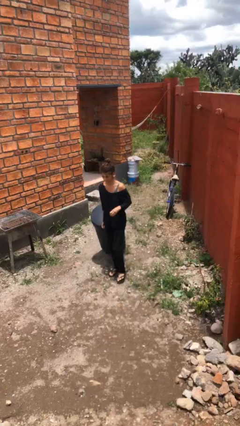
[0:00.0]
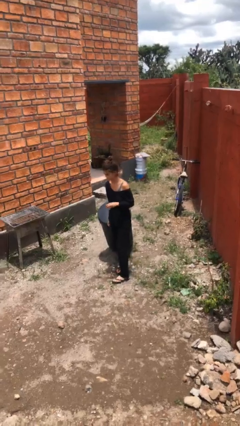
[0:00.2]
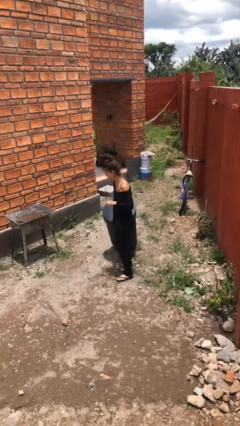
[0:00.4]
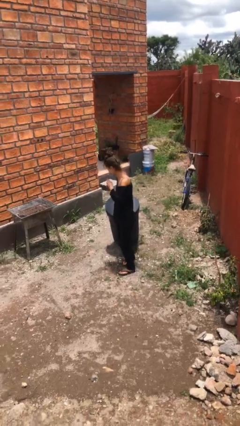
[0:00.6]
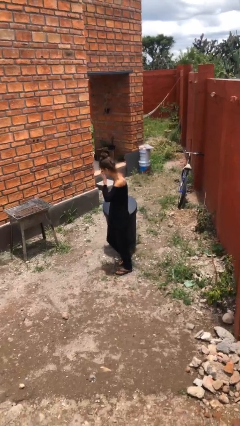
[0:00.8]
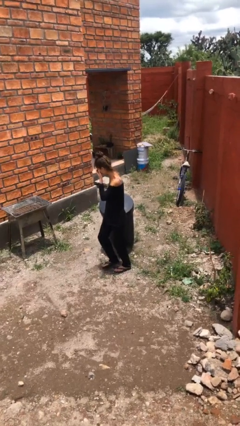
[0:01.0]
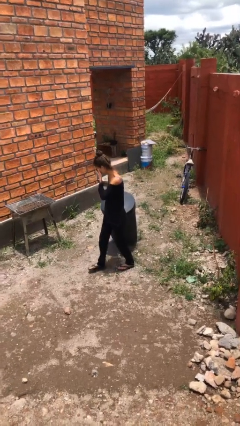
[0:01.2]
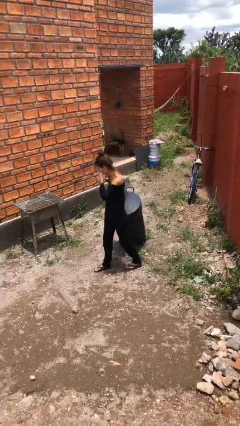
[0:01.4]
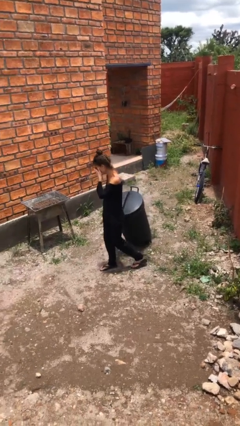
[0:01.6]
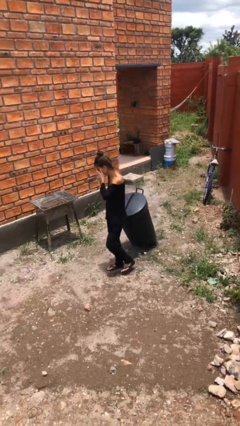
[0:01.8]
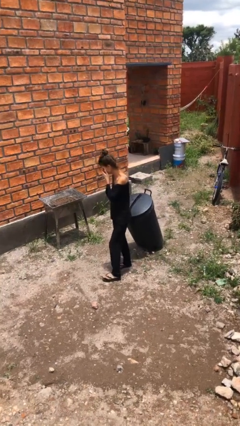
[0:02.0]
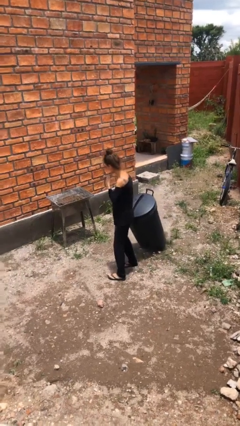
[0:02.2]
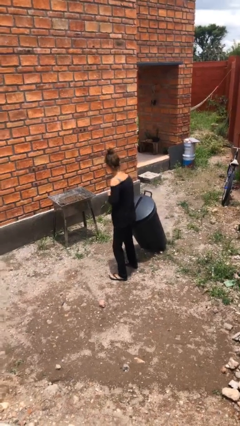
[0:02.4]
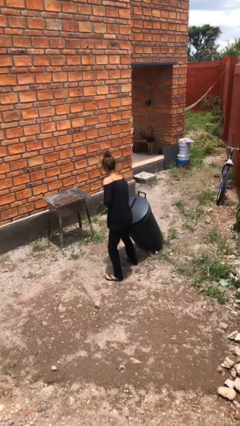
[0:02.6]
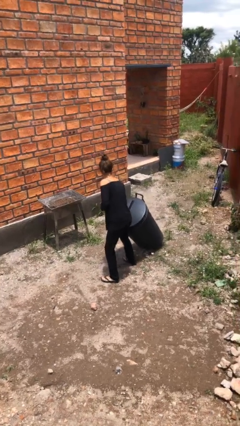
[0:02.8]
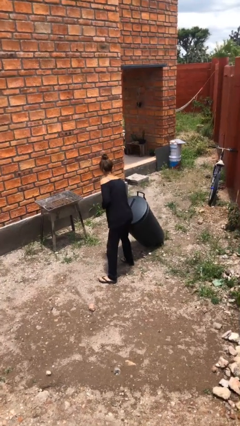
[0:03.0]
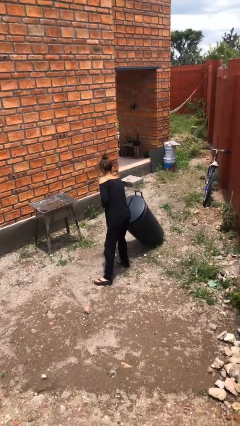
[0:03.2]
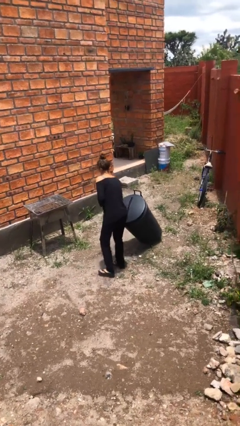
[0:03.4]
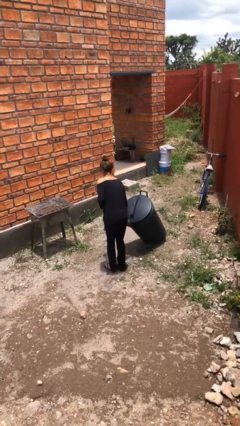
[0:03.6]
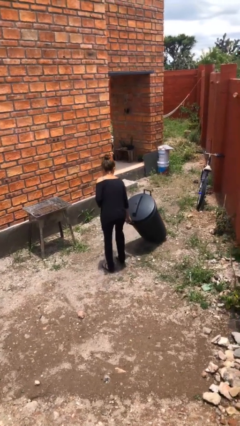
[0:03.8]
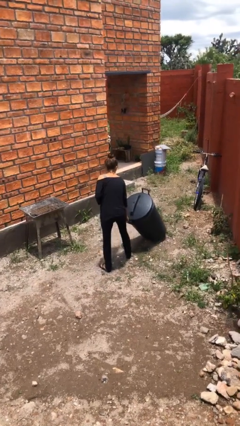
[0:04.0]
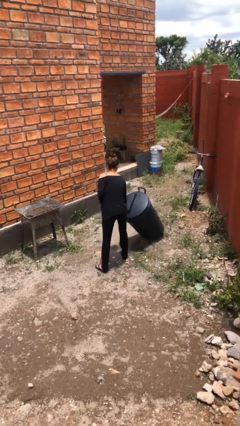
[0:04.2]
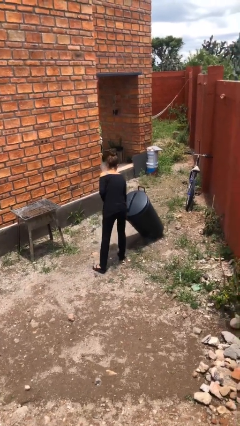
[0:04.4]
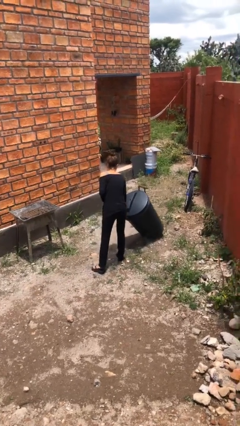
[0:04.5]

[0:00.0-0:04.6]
person pushes wheeled trashcan

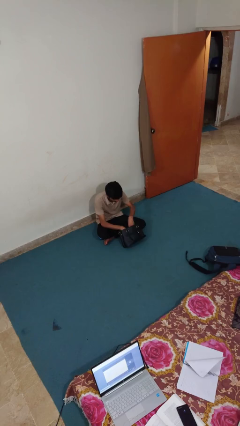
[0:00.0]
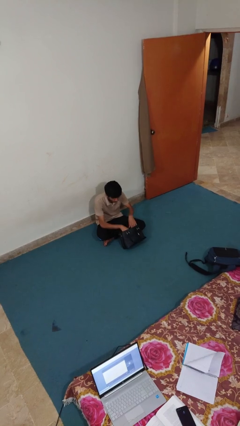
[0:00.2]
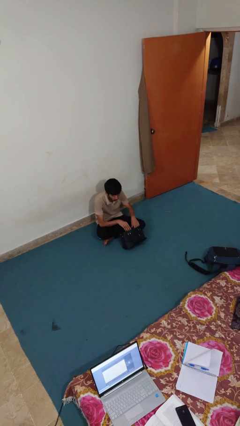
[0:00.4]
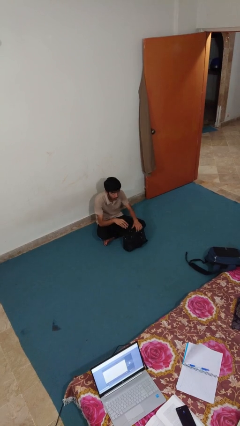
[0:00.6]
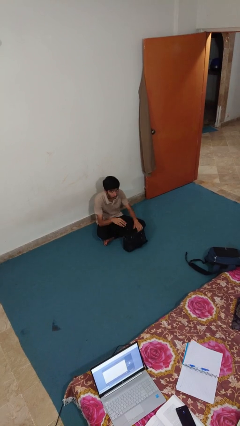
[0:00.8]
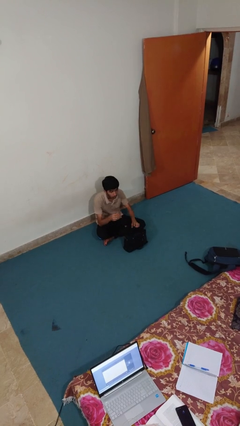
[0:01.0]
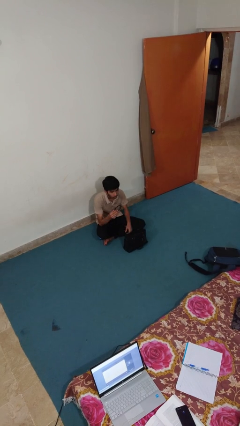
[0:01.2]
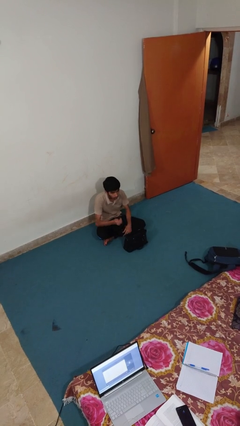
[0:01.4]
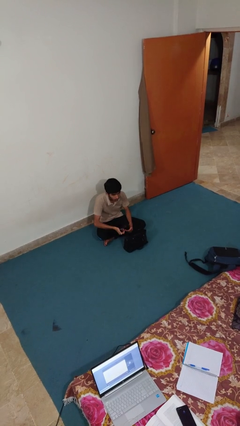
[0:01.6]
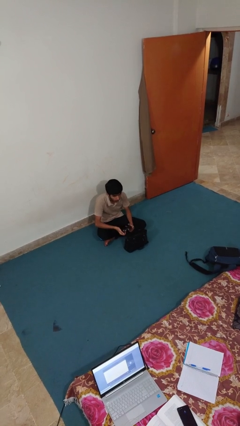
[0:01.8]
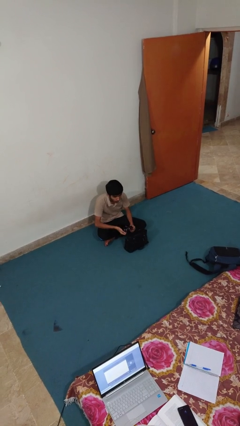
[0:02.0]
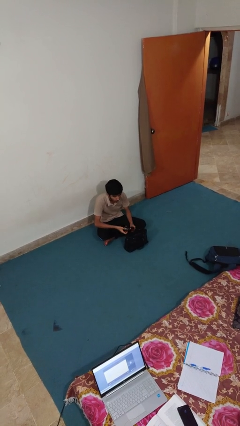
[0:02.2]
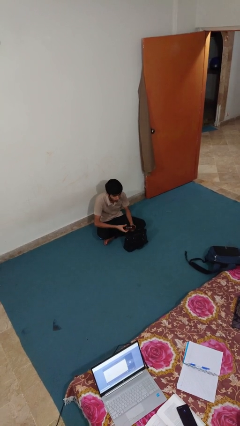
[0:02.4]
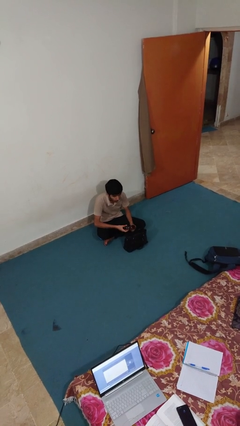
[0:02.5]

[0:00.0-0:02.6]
person takes object from purse

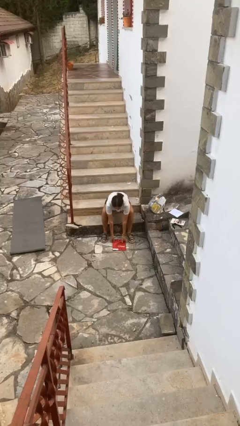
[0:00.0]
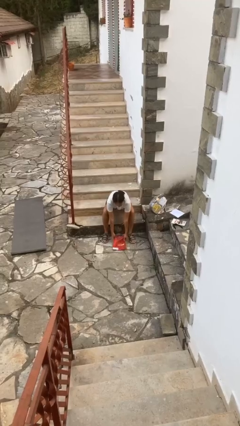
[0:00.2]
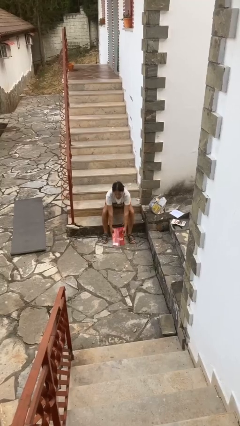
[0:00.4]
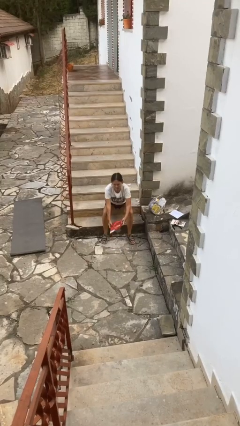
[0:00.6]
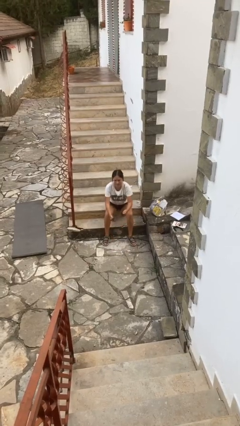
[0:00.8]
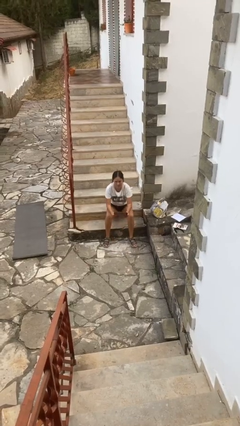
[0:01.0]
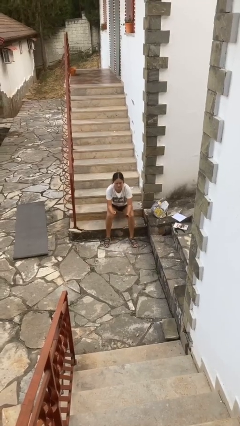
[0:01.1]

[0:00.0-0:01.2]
person picks up object from floor

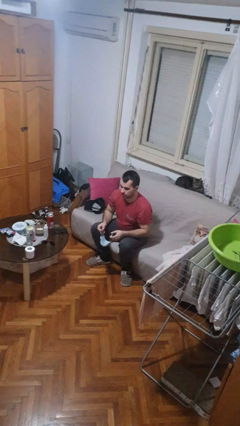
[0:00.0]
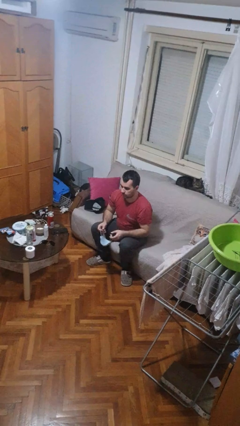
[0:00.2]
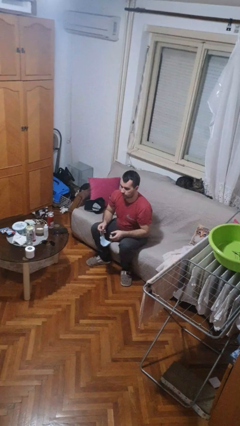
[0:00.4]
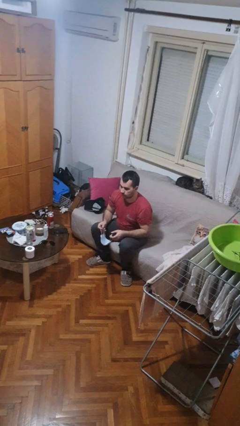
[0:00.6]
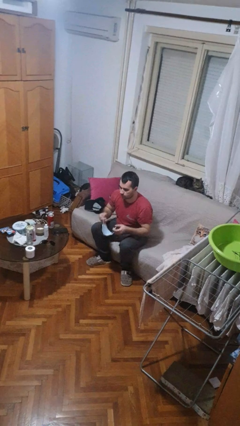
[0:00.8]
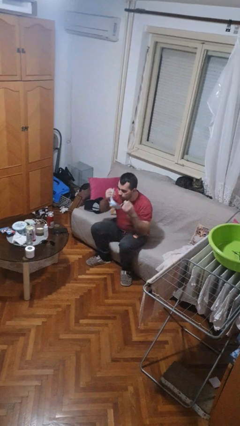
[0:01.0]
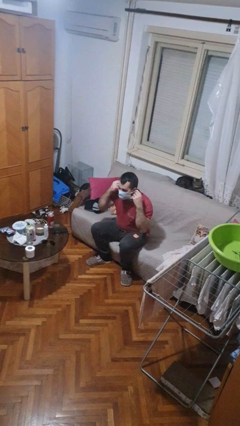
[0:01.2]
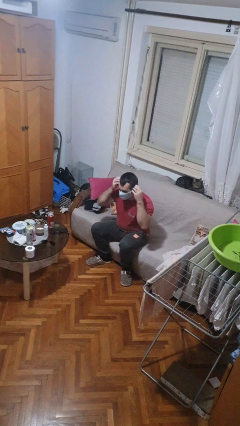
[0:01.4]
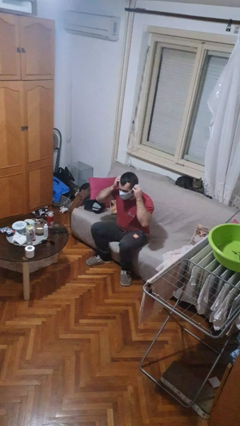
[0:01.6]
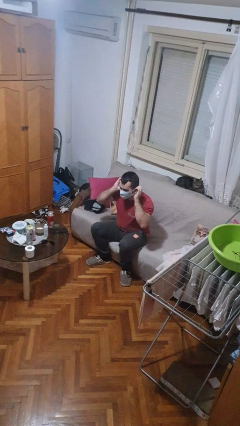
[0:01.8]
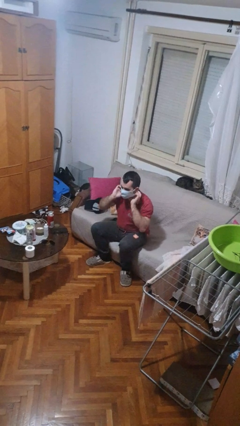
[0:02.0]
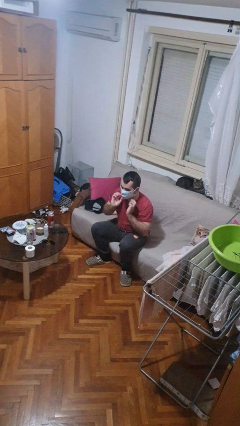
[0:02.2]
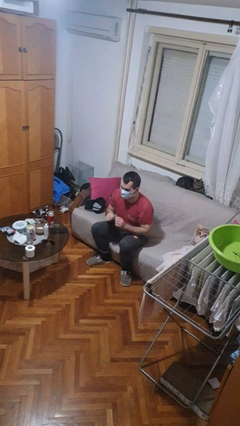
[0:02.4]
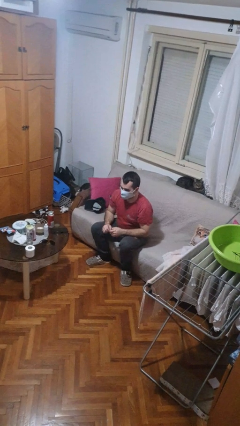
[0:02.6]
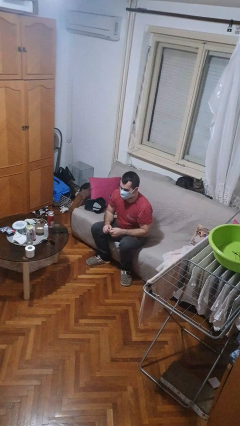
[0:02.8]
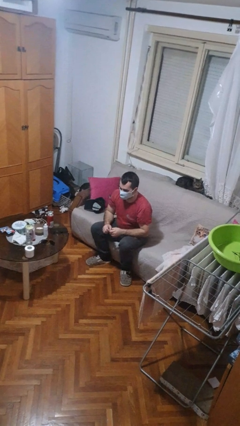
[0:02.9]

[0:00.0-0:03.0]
person puts on facemask

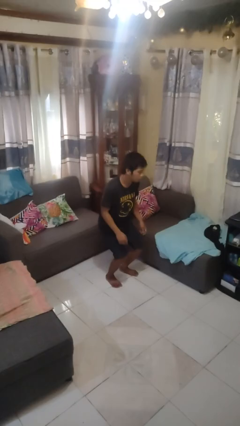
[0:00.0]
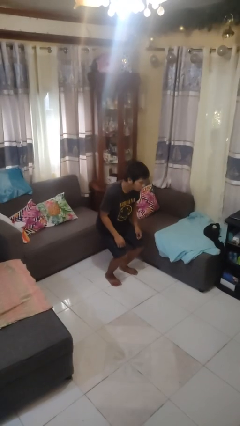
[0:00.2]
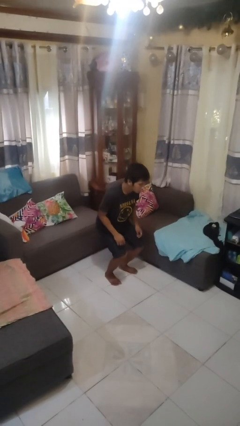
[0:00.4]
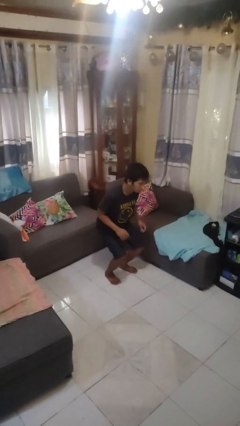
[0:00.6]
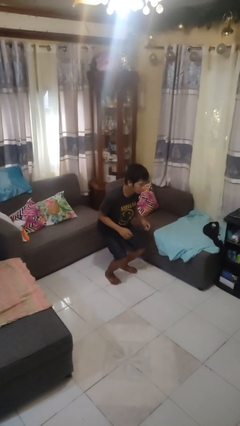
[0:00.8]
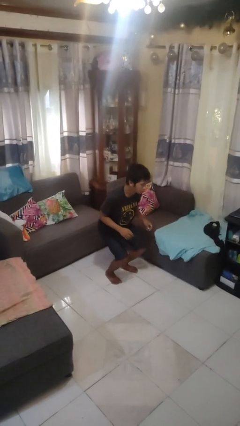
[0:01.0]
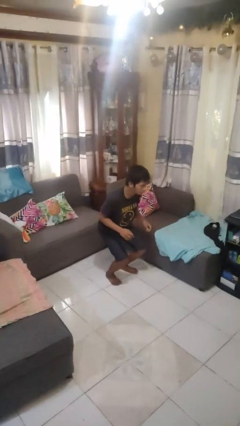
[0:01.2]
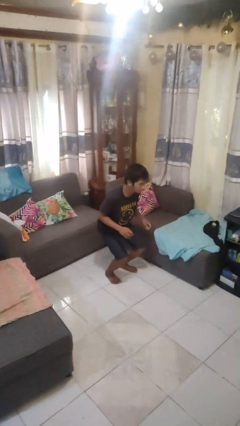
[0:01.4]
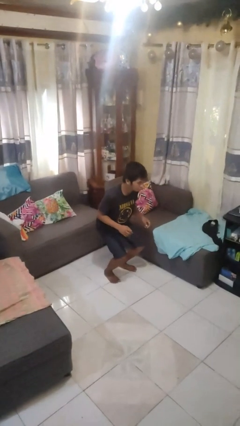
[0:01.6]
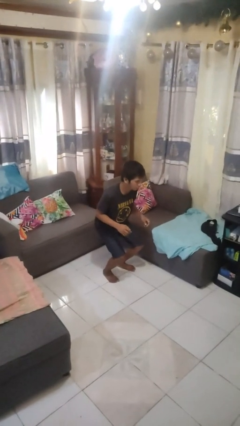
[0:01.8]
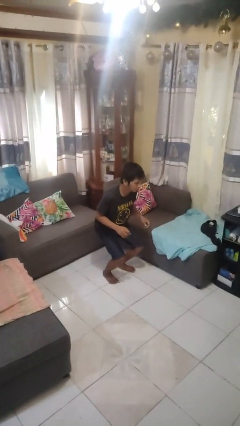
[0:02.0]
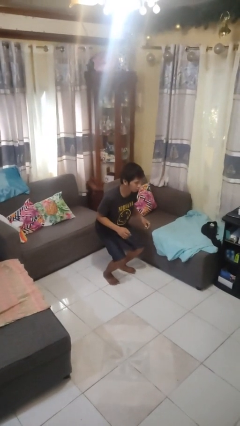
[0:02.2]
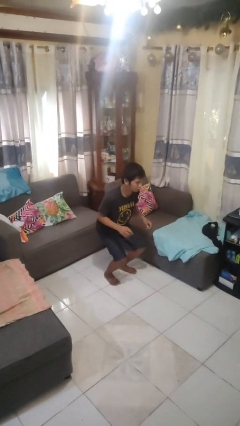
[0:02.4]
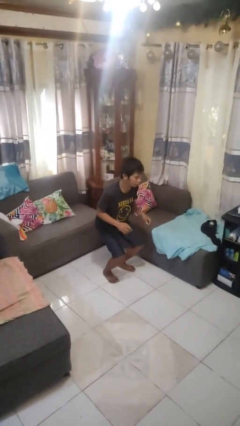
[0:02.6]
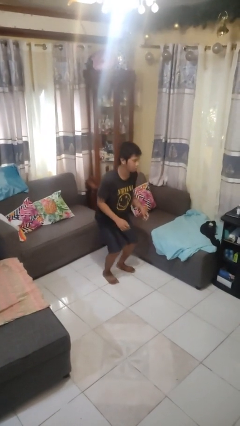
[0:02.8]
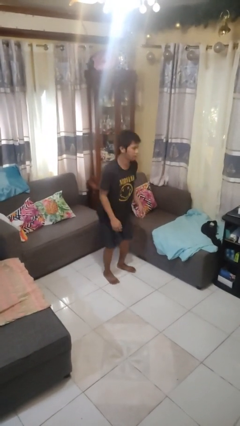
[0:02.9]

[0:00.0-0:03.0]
person squats

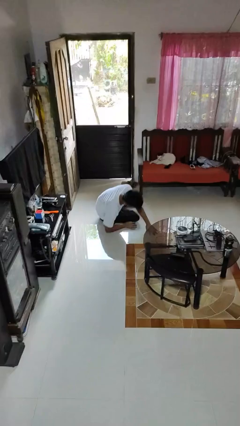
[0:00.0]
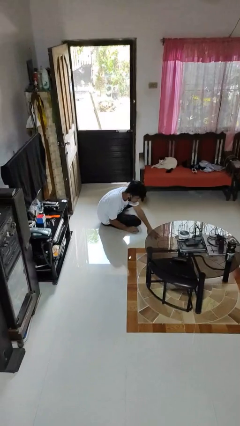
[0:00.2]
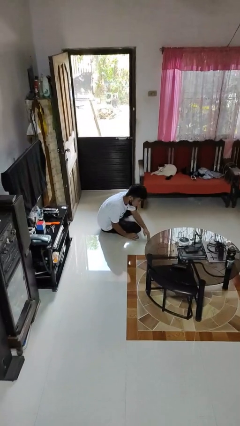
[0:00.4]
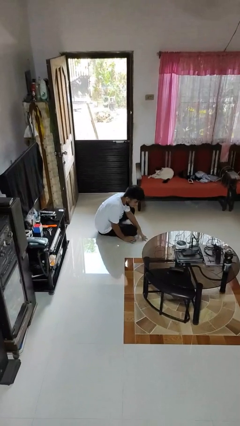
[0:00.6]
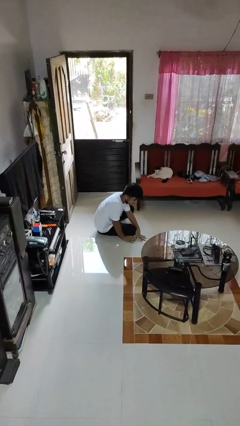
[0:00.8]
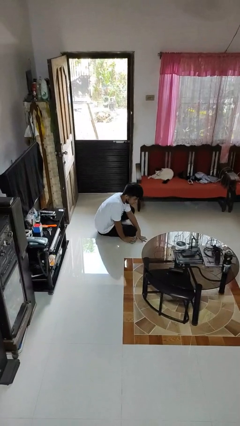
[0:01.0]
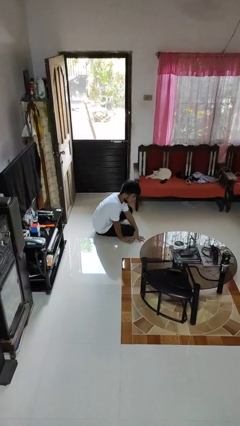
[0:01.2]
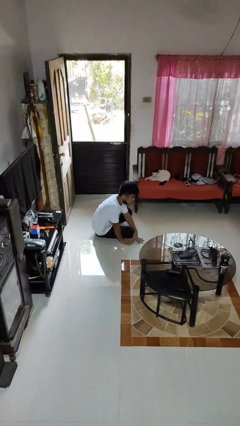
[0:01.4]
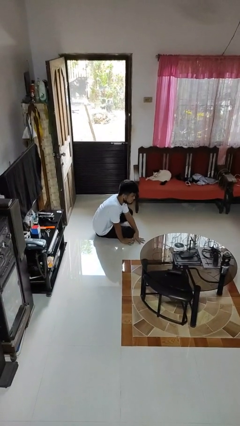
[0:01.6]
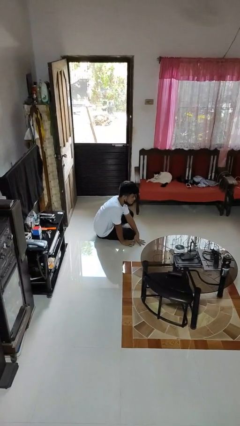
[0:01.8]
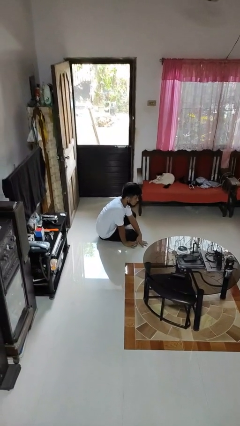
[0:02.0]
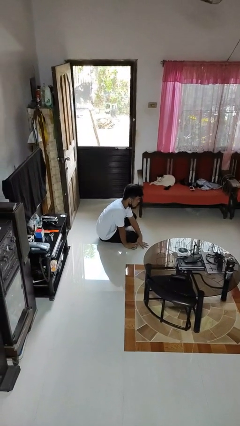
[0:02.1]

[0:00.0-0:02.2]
person lies down on floor

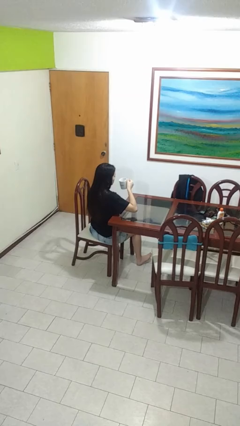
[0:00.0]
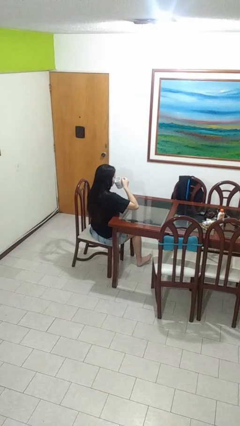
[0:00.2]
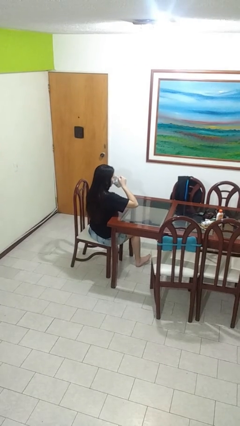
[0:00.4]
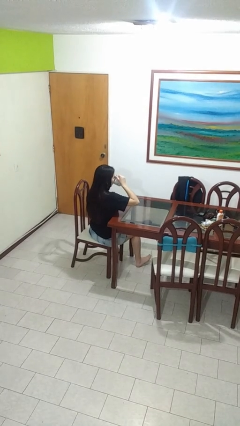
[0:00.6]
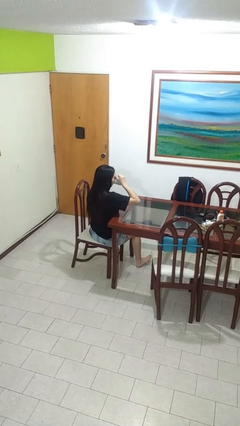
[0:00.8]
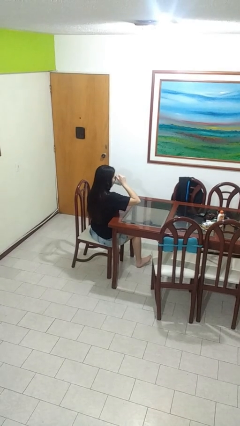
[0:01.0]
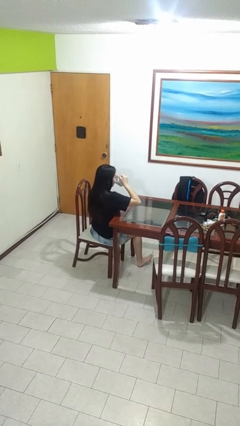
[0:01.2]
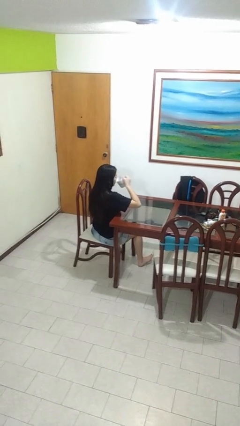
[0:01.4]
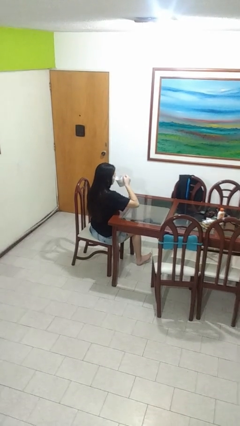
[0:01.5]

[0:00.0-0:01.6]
person drinks from mug
